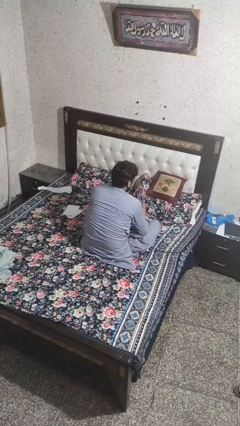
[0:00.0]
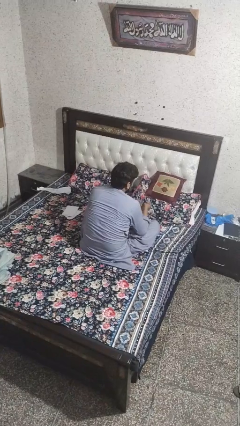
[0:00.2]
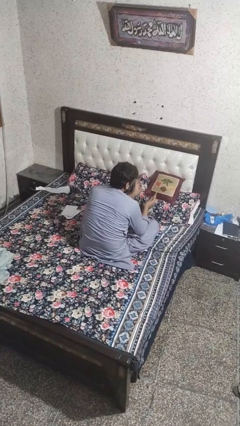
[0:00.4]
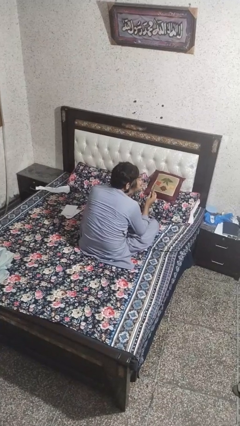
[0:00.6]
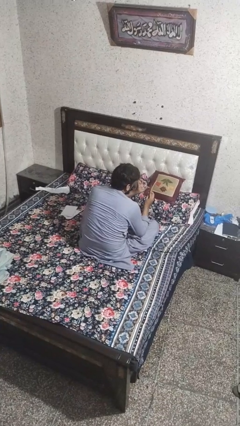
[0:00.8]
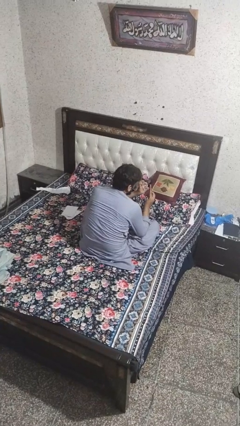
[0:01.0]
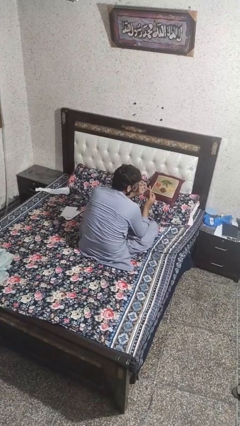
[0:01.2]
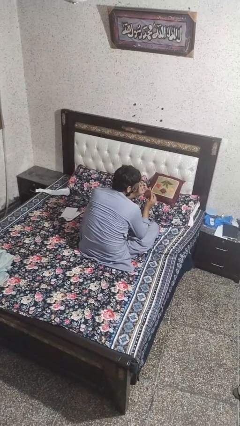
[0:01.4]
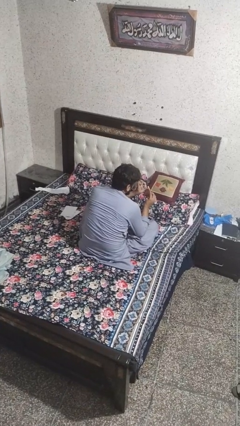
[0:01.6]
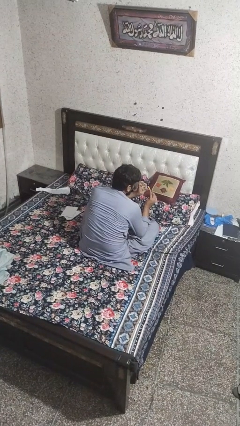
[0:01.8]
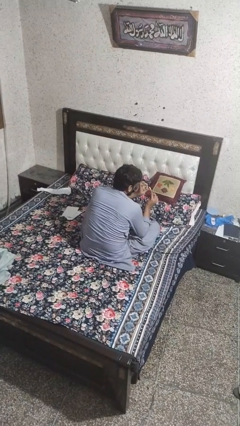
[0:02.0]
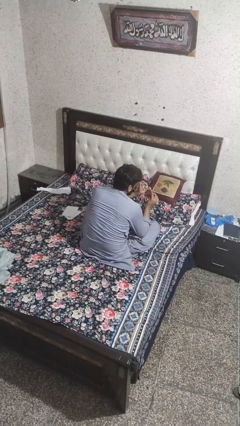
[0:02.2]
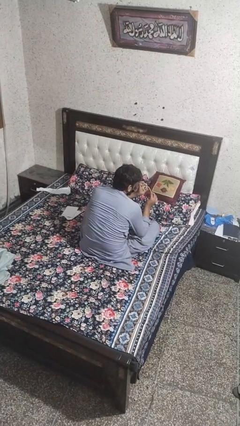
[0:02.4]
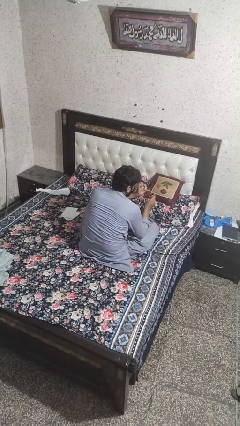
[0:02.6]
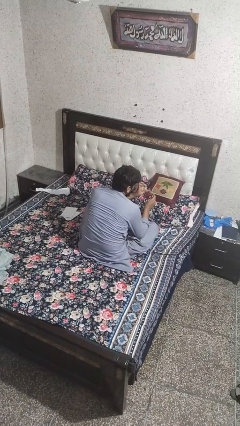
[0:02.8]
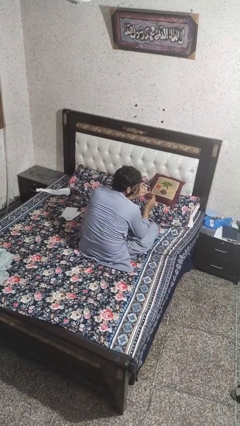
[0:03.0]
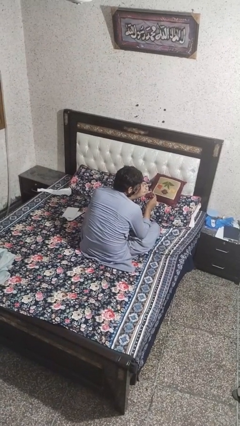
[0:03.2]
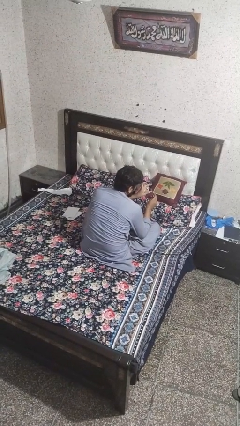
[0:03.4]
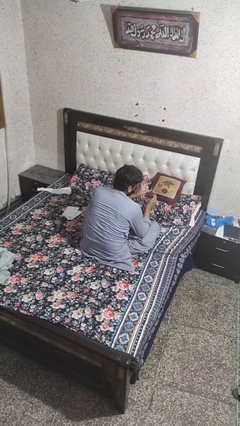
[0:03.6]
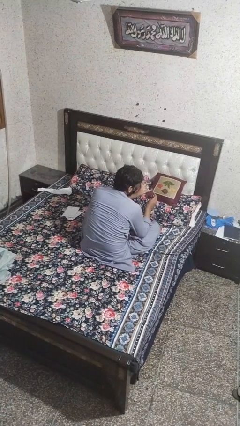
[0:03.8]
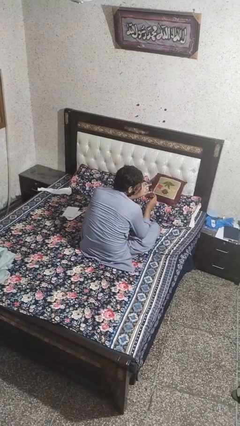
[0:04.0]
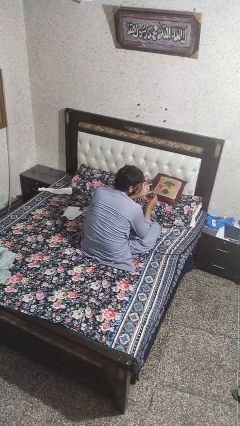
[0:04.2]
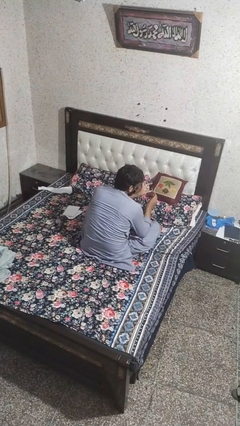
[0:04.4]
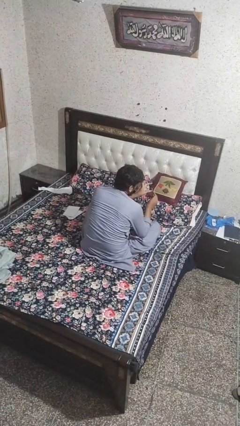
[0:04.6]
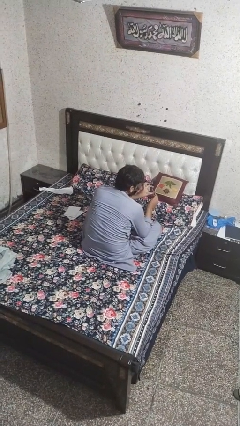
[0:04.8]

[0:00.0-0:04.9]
person files fingernails

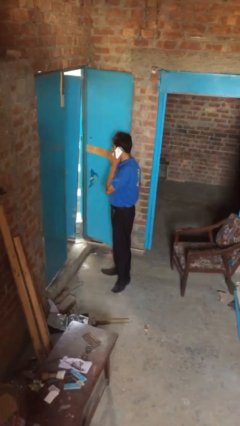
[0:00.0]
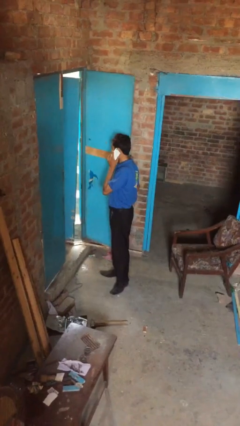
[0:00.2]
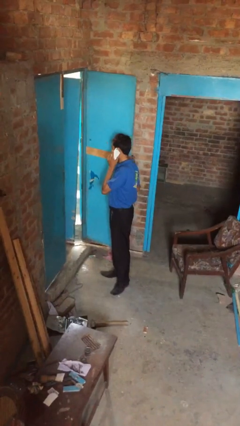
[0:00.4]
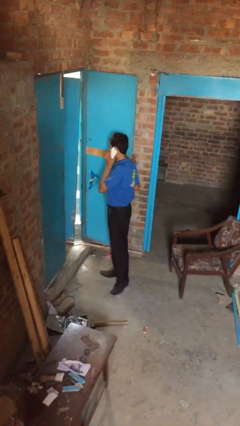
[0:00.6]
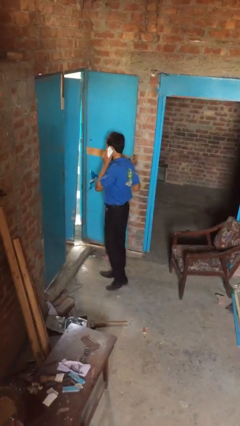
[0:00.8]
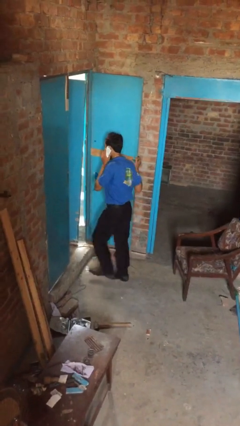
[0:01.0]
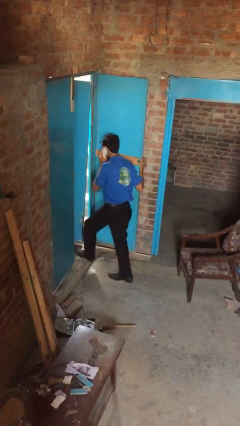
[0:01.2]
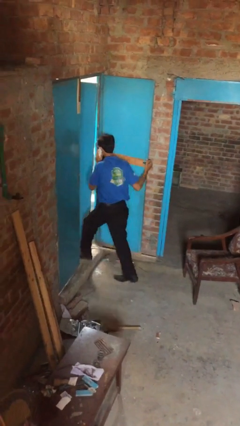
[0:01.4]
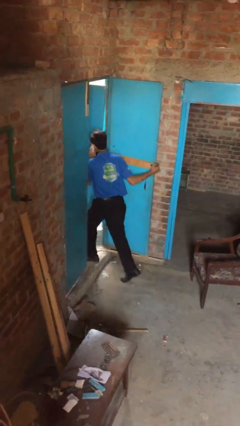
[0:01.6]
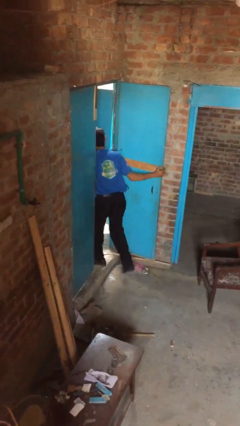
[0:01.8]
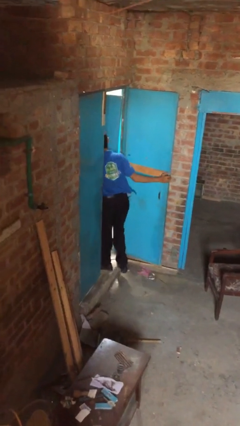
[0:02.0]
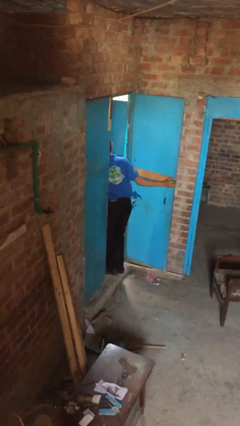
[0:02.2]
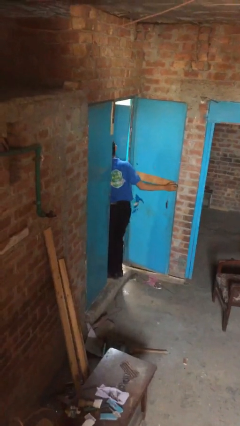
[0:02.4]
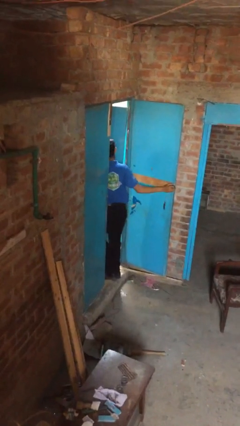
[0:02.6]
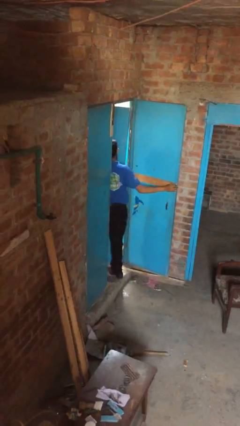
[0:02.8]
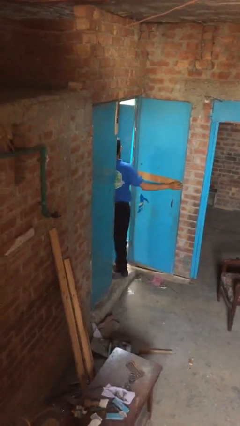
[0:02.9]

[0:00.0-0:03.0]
person exits scene through structure

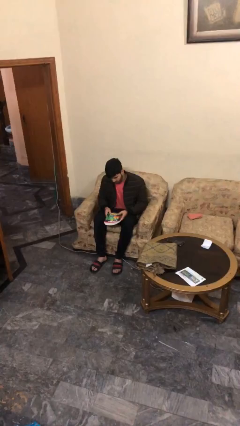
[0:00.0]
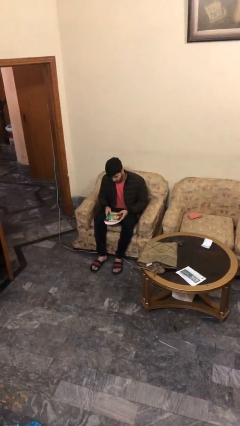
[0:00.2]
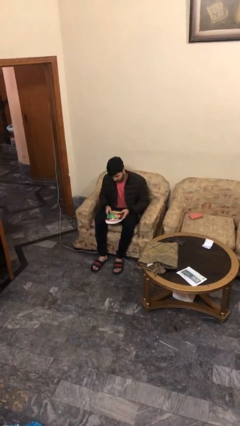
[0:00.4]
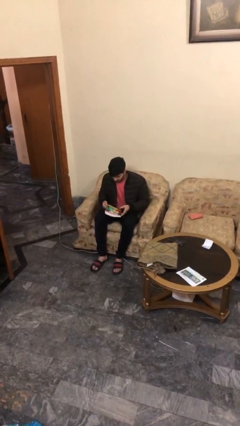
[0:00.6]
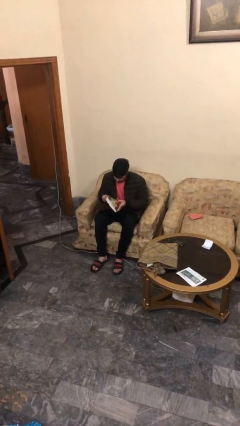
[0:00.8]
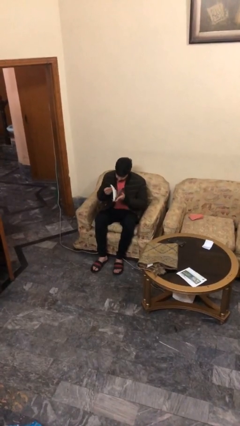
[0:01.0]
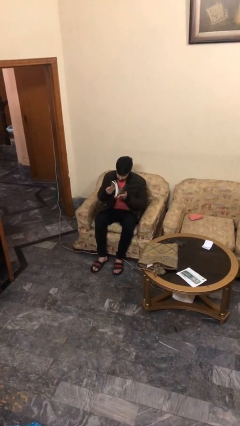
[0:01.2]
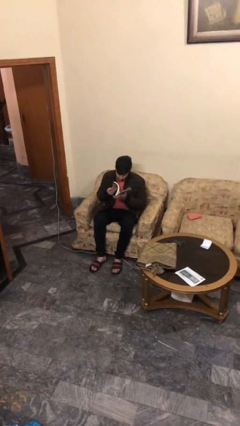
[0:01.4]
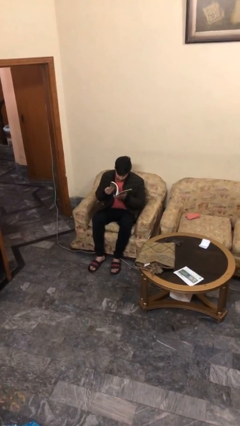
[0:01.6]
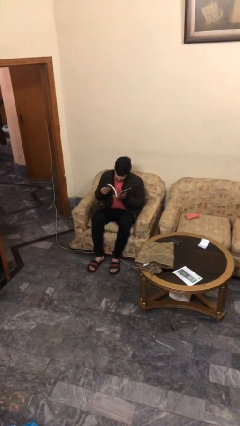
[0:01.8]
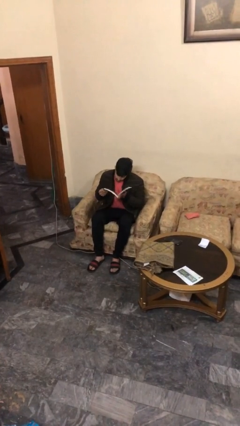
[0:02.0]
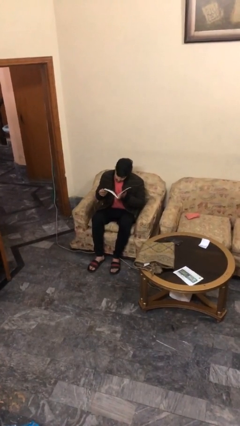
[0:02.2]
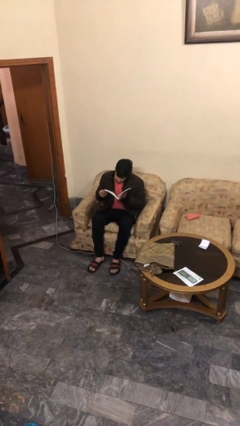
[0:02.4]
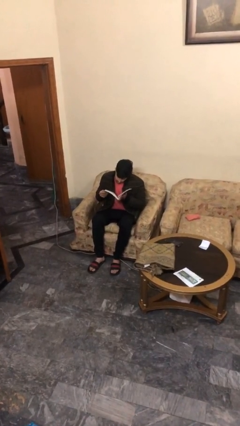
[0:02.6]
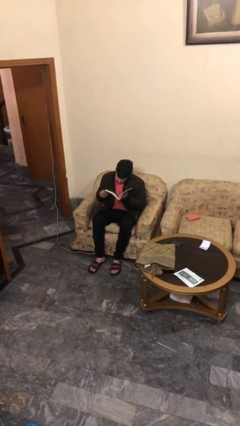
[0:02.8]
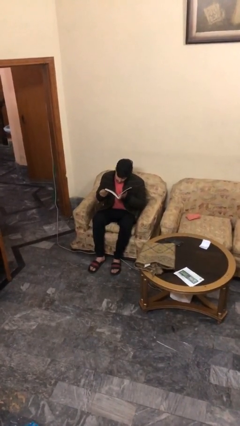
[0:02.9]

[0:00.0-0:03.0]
person reads document

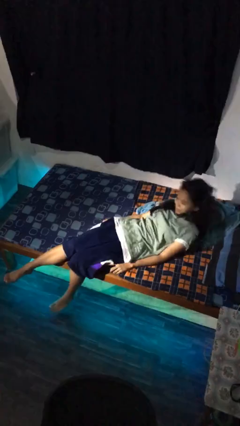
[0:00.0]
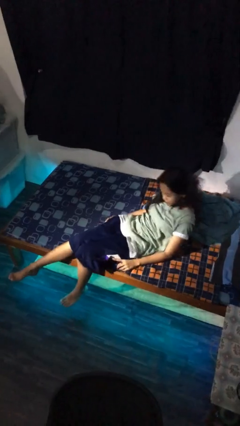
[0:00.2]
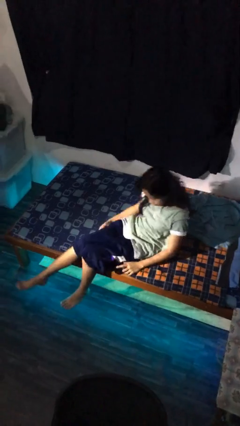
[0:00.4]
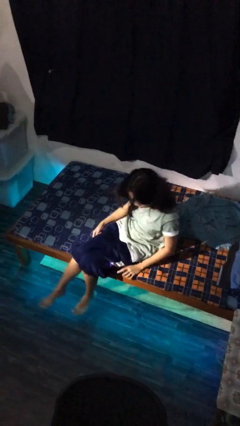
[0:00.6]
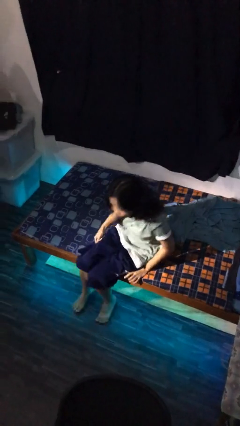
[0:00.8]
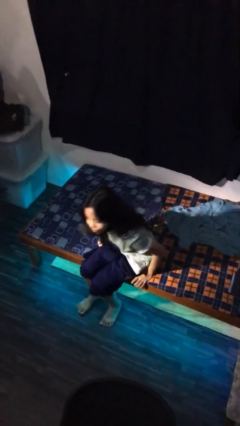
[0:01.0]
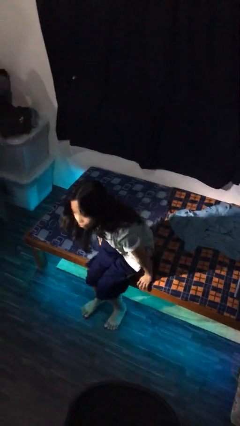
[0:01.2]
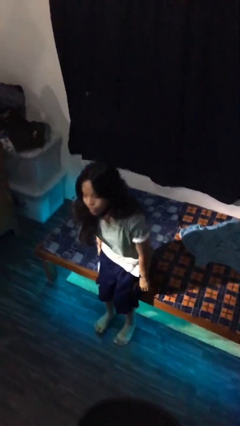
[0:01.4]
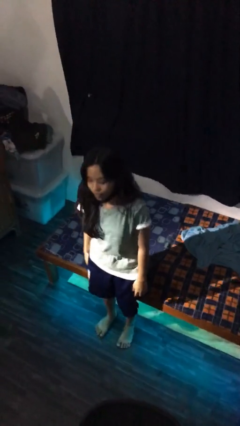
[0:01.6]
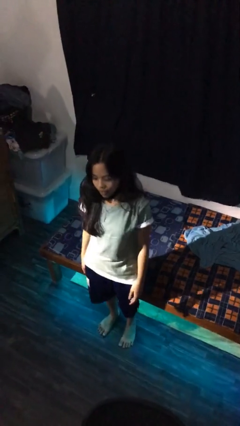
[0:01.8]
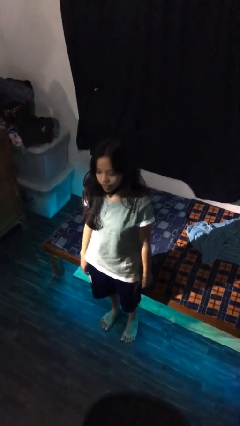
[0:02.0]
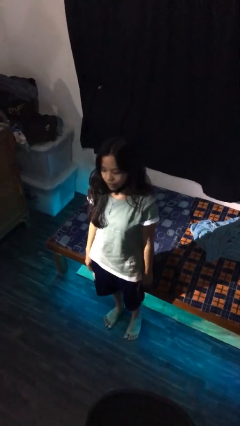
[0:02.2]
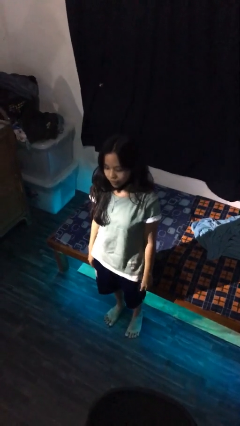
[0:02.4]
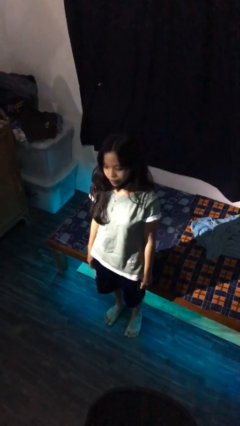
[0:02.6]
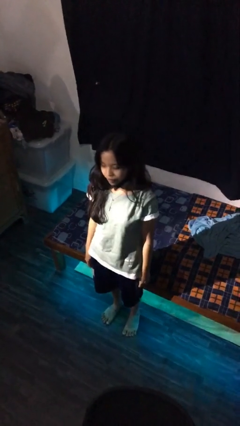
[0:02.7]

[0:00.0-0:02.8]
person stands up

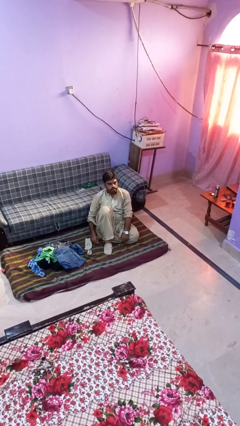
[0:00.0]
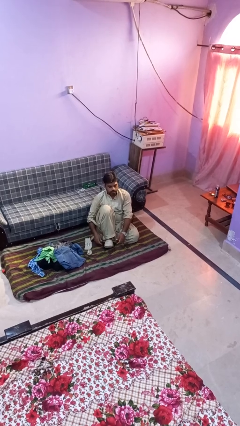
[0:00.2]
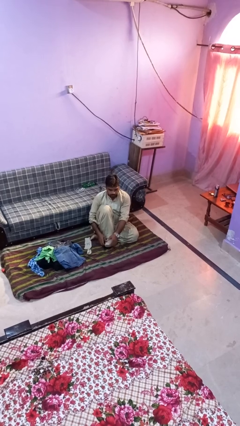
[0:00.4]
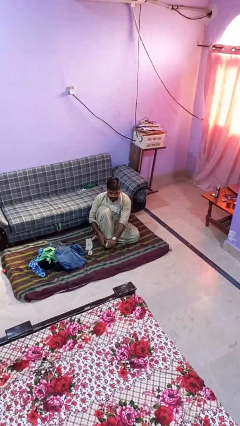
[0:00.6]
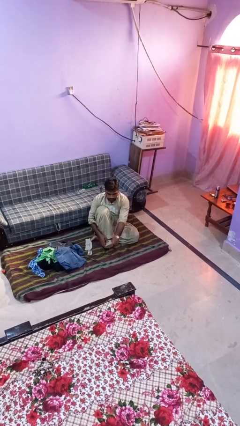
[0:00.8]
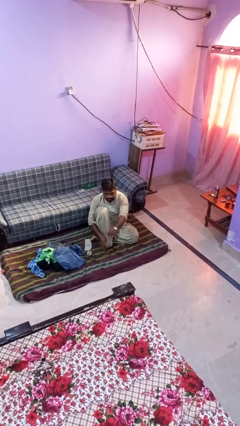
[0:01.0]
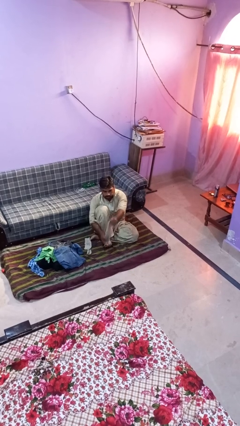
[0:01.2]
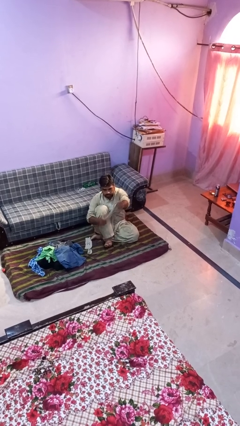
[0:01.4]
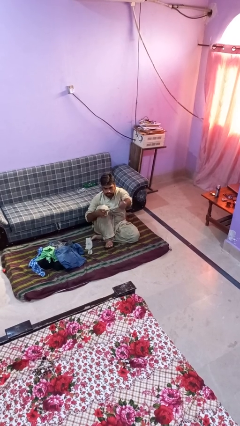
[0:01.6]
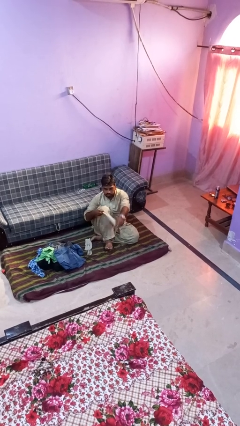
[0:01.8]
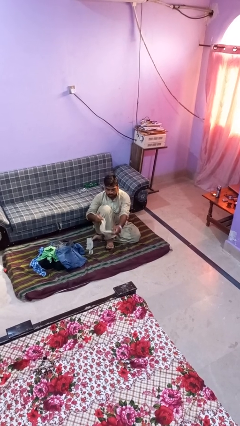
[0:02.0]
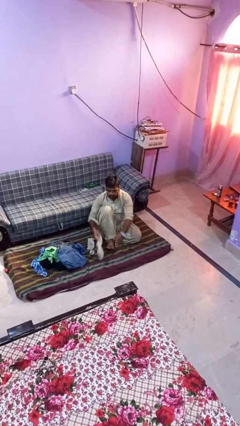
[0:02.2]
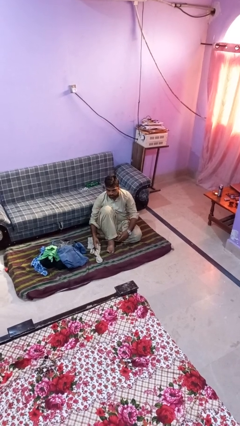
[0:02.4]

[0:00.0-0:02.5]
person takes off socks

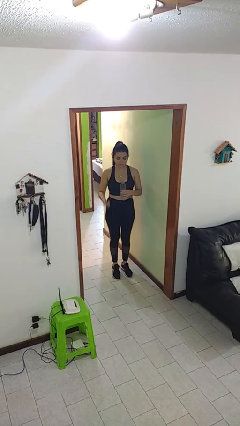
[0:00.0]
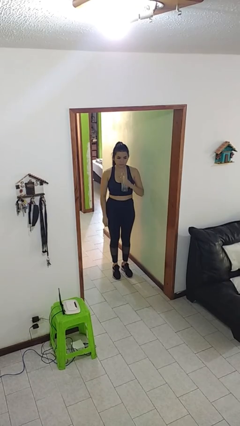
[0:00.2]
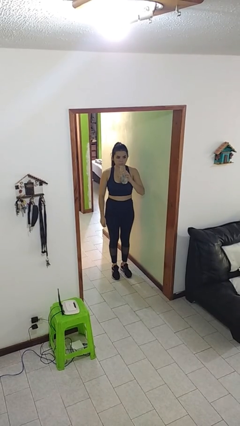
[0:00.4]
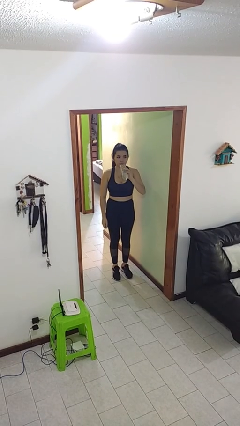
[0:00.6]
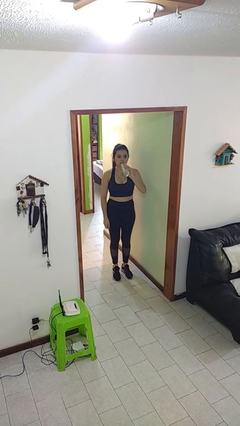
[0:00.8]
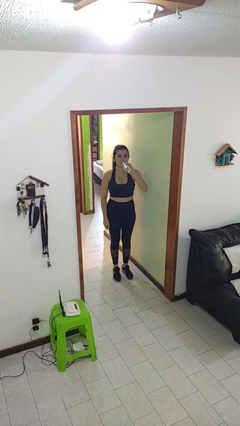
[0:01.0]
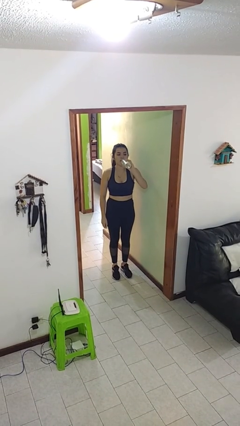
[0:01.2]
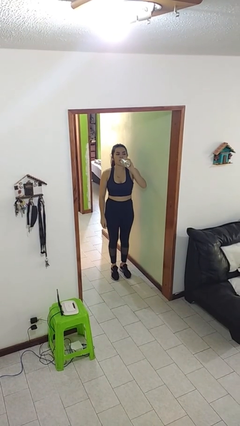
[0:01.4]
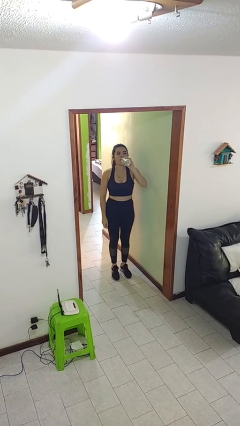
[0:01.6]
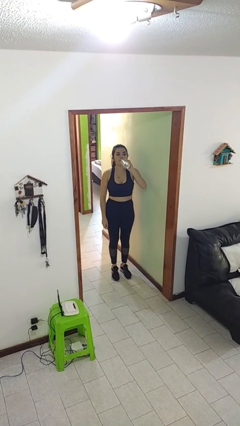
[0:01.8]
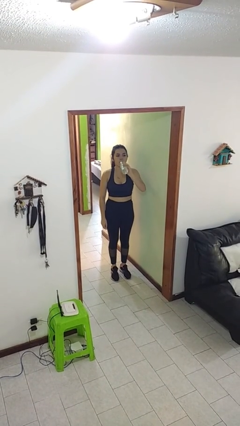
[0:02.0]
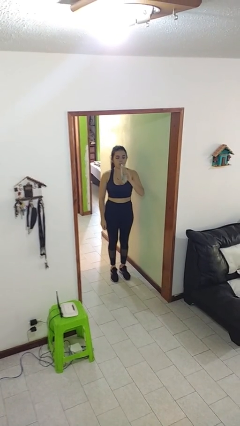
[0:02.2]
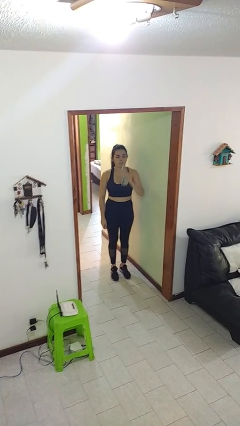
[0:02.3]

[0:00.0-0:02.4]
person drinks from bottle
